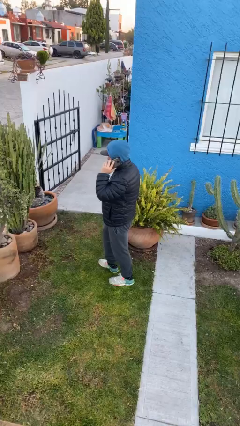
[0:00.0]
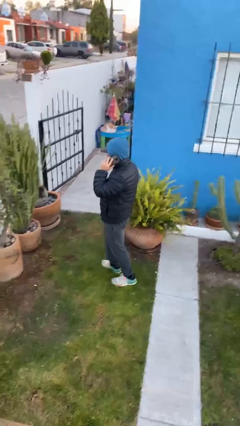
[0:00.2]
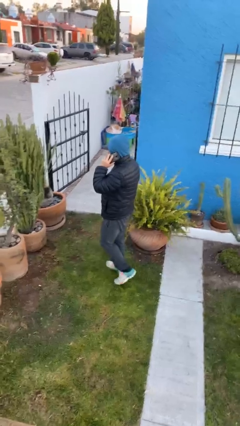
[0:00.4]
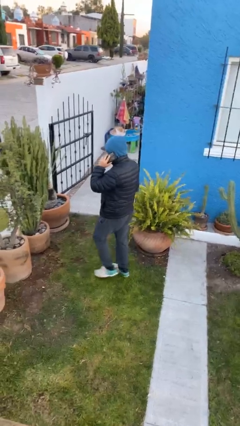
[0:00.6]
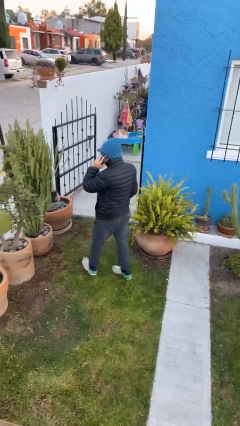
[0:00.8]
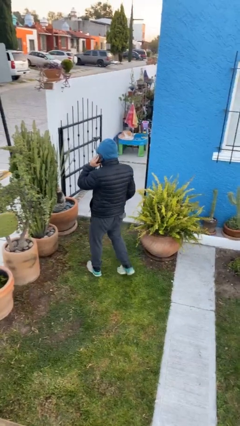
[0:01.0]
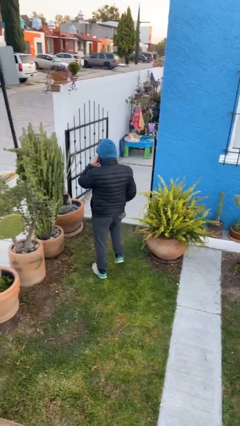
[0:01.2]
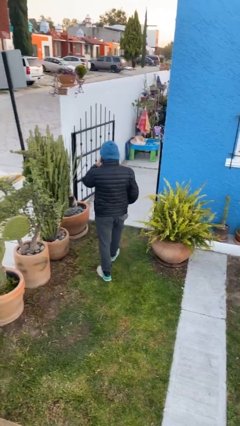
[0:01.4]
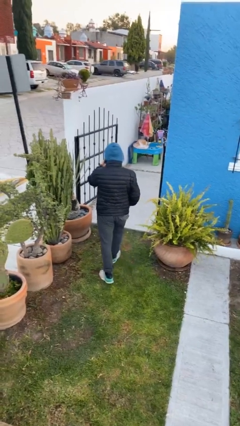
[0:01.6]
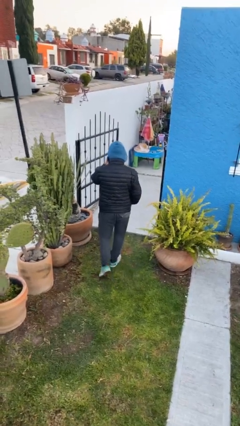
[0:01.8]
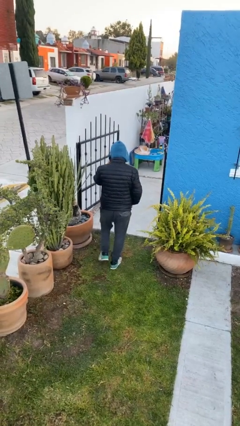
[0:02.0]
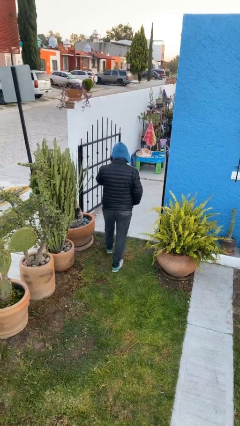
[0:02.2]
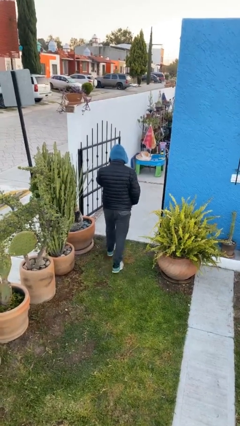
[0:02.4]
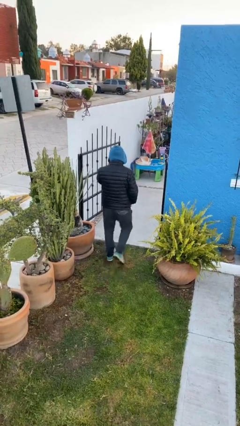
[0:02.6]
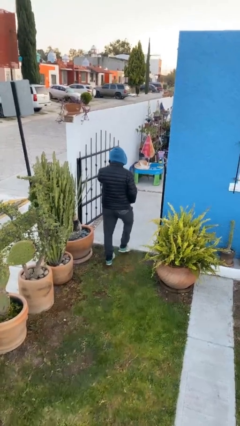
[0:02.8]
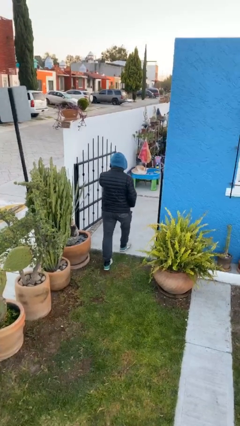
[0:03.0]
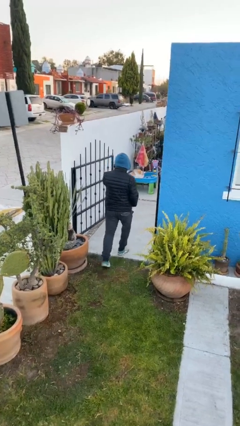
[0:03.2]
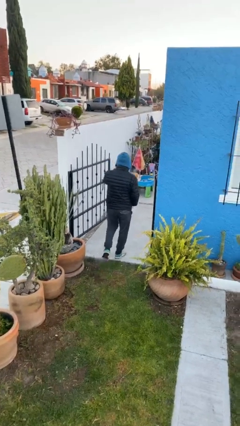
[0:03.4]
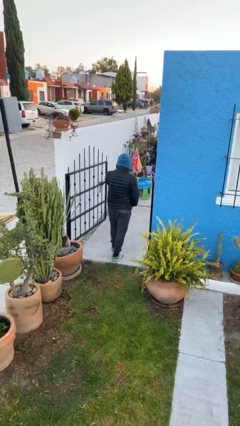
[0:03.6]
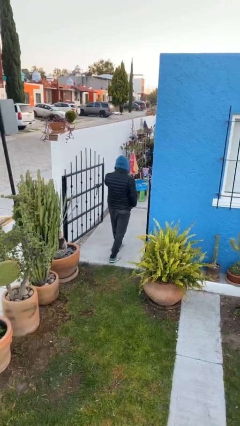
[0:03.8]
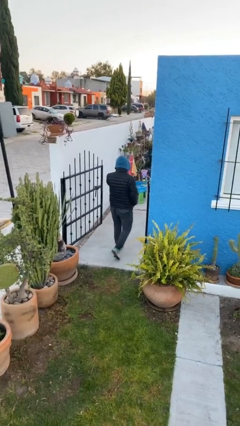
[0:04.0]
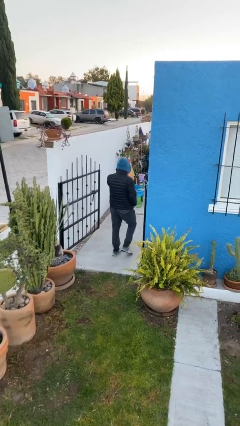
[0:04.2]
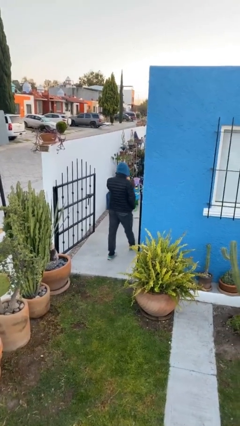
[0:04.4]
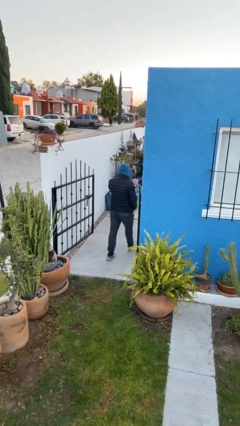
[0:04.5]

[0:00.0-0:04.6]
person exits scene through structure

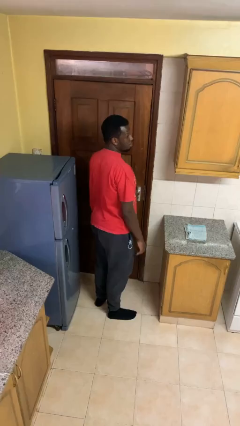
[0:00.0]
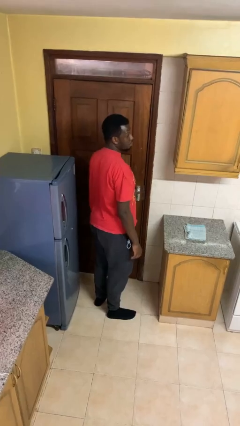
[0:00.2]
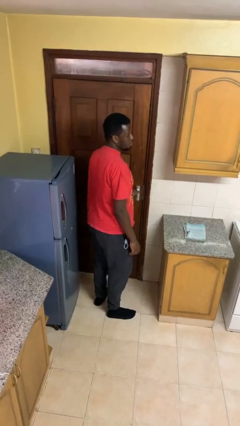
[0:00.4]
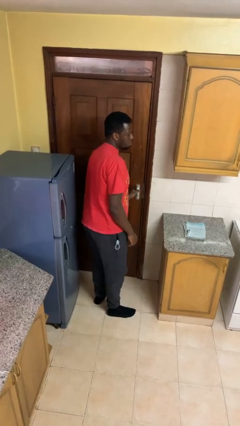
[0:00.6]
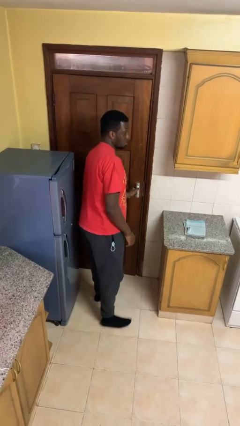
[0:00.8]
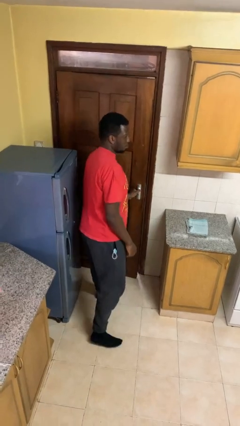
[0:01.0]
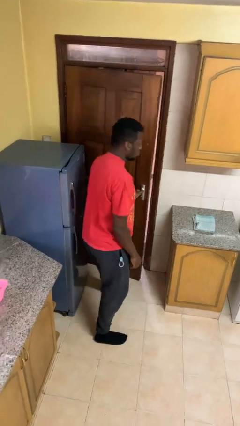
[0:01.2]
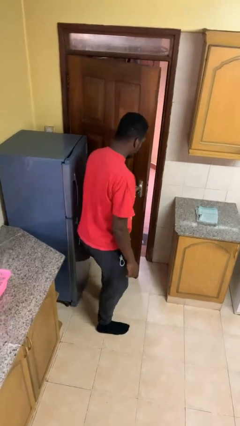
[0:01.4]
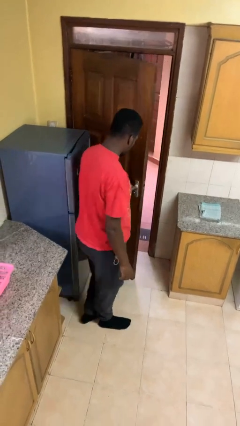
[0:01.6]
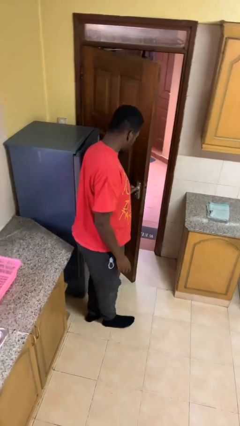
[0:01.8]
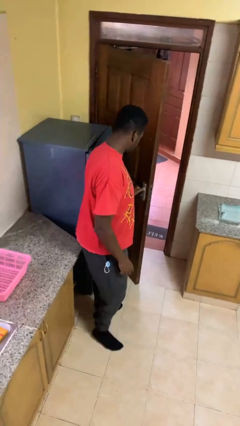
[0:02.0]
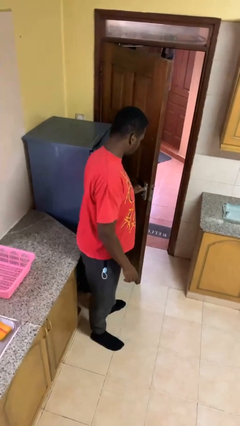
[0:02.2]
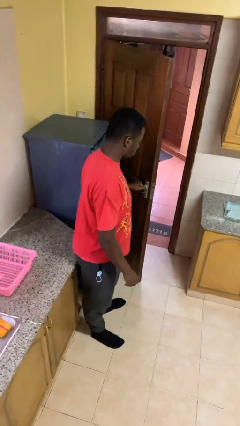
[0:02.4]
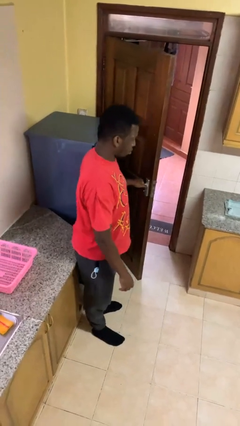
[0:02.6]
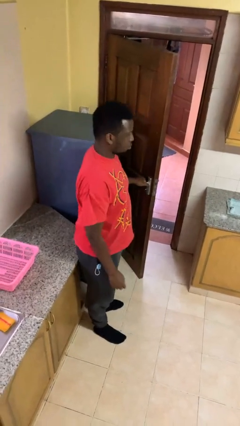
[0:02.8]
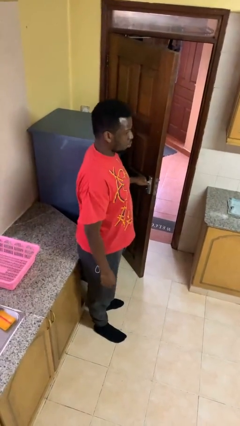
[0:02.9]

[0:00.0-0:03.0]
person opens facility door

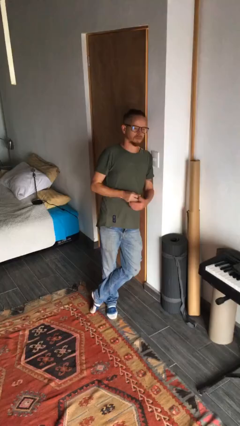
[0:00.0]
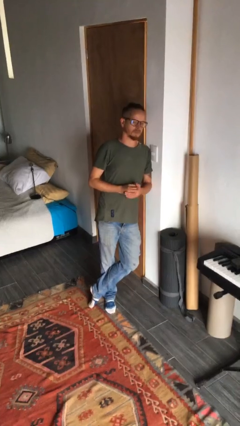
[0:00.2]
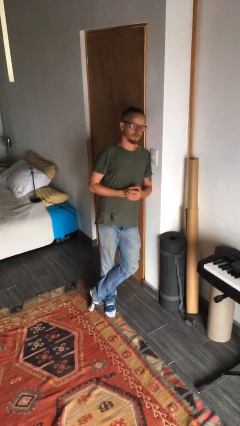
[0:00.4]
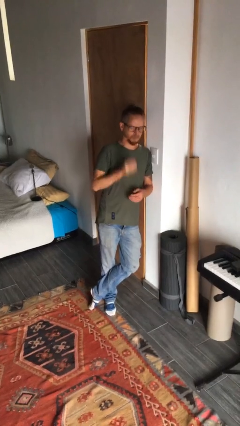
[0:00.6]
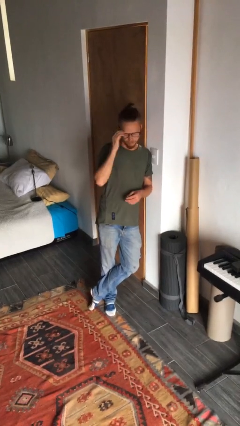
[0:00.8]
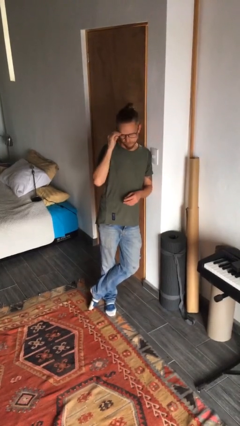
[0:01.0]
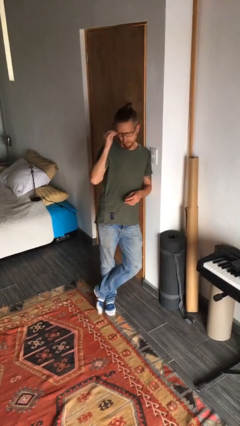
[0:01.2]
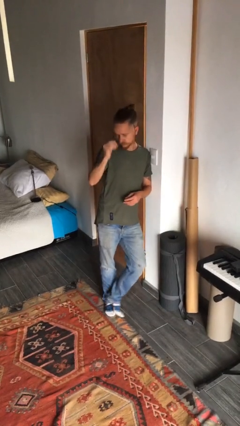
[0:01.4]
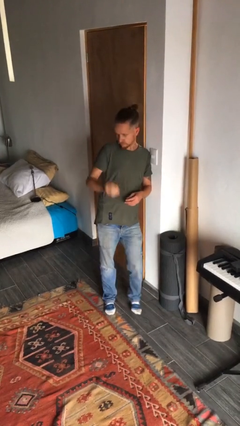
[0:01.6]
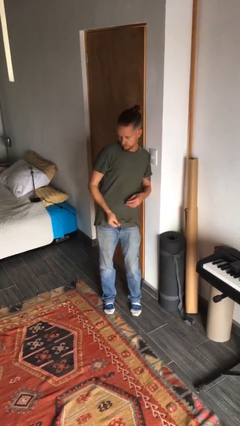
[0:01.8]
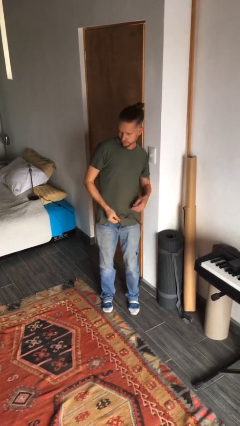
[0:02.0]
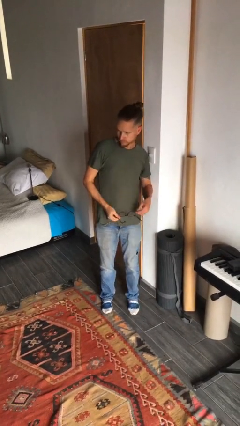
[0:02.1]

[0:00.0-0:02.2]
person takes off glasses

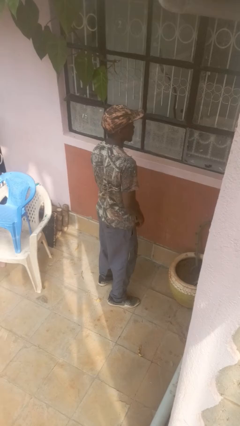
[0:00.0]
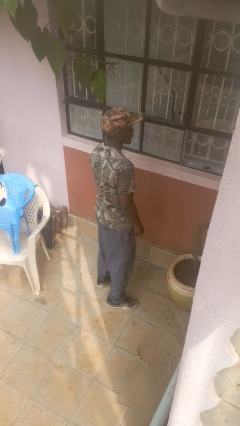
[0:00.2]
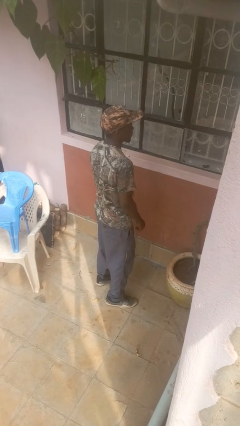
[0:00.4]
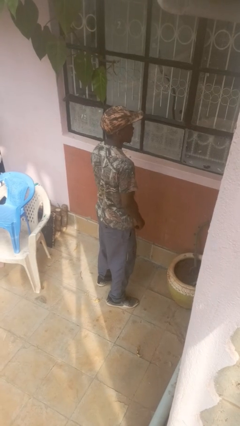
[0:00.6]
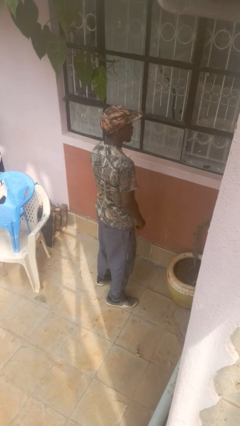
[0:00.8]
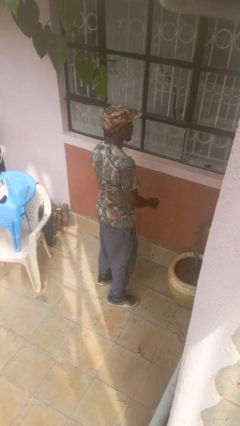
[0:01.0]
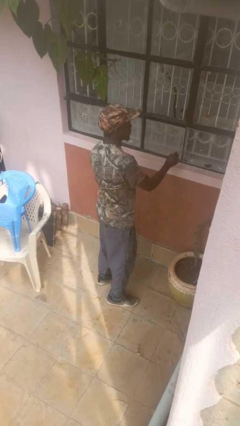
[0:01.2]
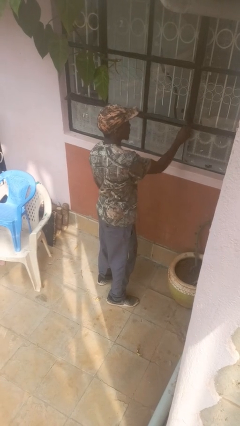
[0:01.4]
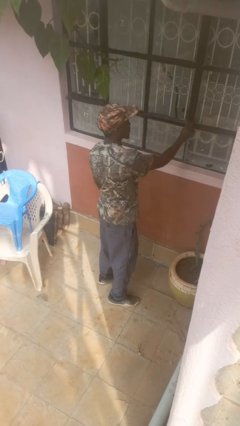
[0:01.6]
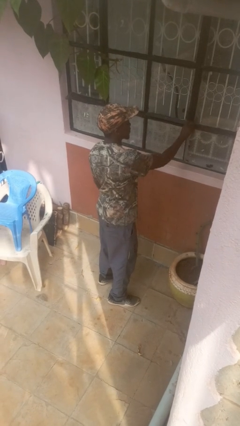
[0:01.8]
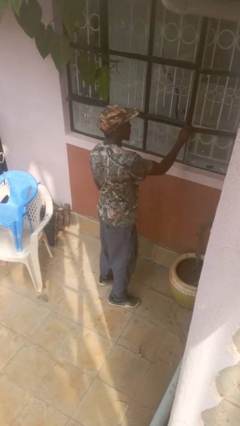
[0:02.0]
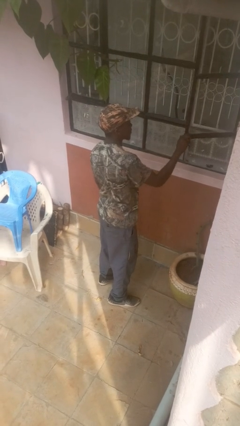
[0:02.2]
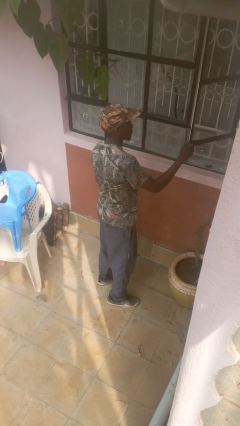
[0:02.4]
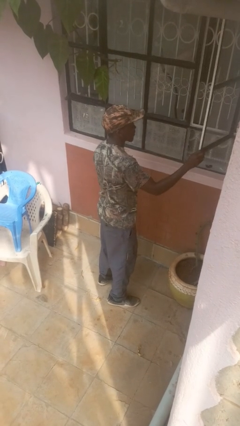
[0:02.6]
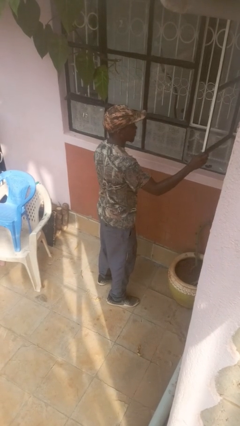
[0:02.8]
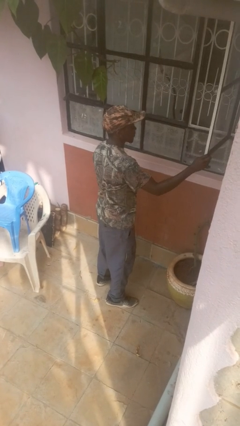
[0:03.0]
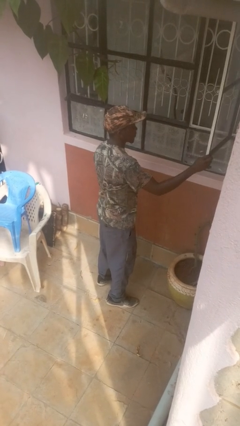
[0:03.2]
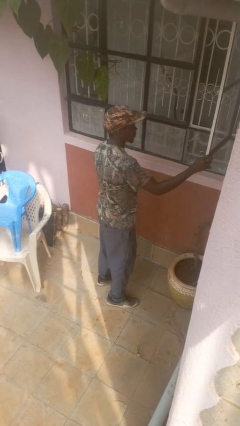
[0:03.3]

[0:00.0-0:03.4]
person opens home window

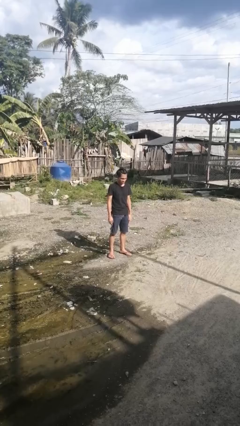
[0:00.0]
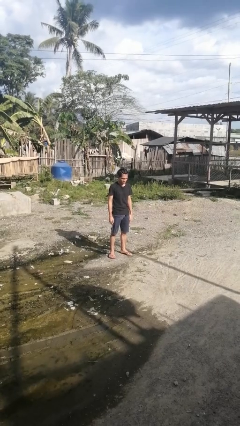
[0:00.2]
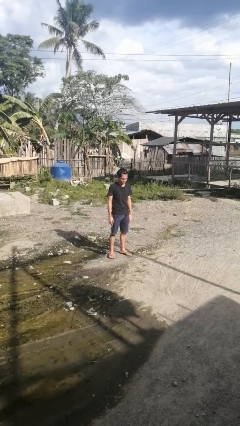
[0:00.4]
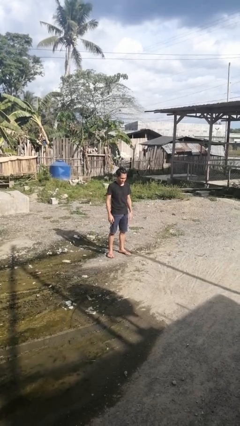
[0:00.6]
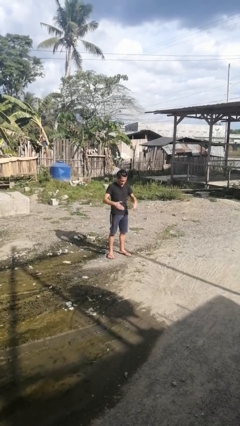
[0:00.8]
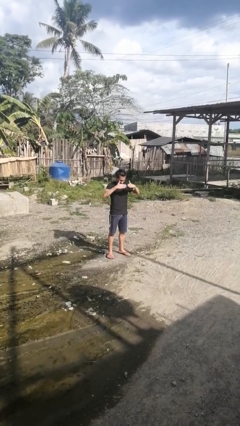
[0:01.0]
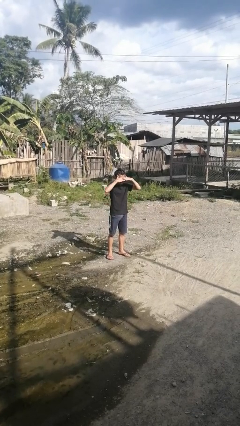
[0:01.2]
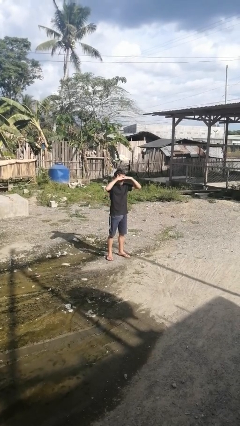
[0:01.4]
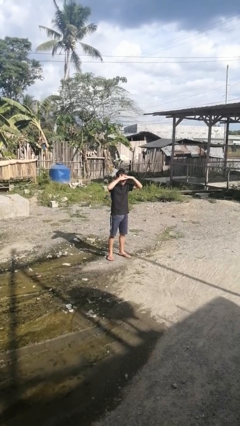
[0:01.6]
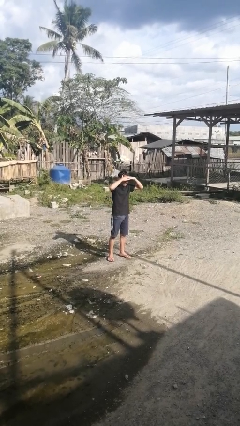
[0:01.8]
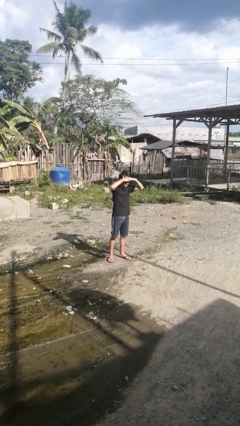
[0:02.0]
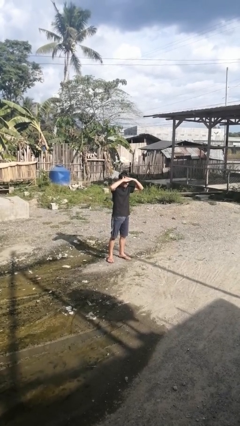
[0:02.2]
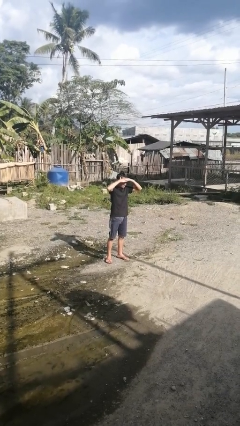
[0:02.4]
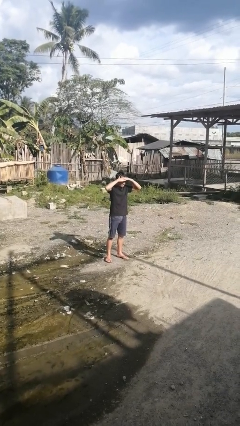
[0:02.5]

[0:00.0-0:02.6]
person shades eyes

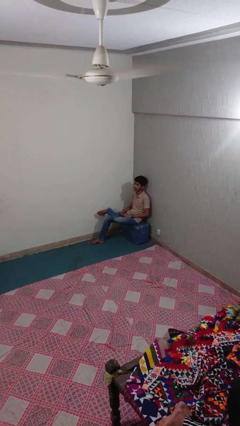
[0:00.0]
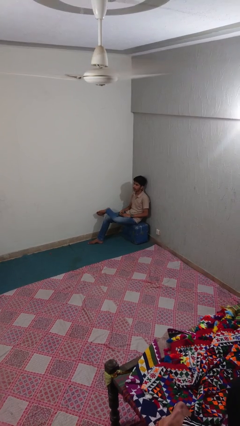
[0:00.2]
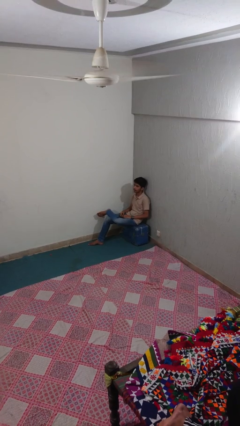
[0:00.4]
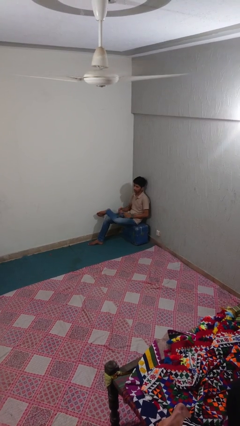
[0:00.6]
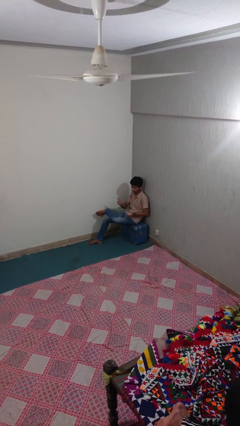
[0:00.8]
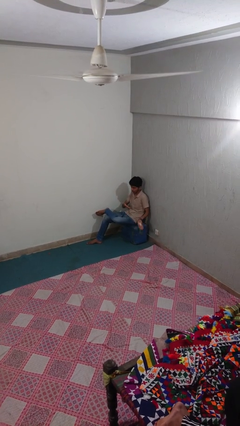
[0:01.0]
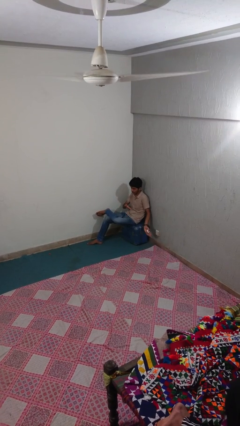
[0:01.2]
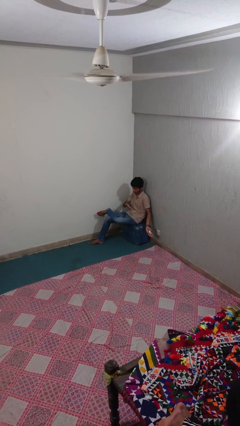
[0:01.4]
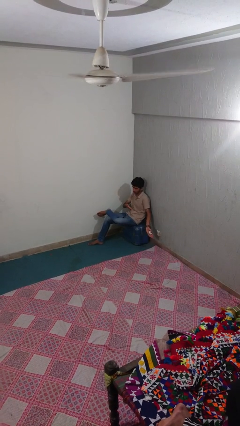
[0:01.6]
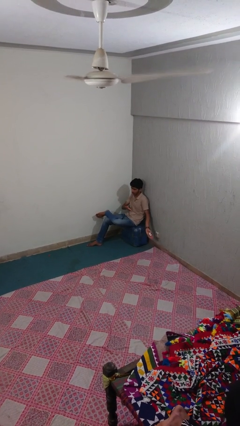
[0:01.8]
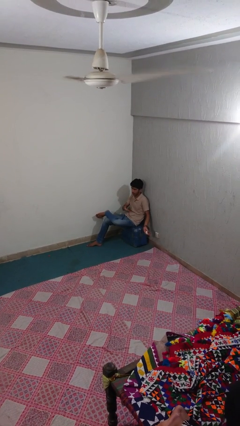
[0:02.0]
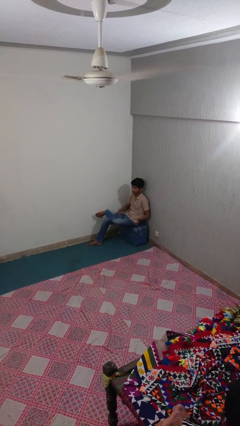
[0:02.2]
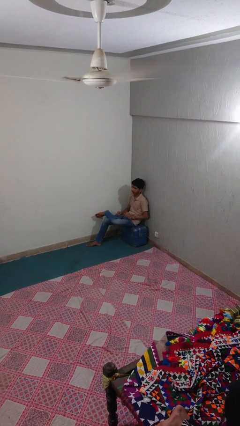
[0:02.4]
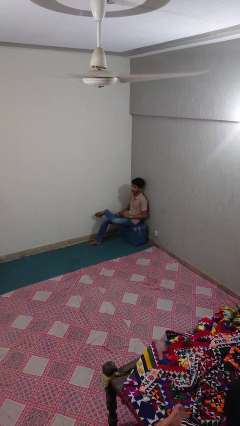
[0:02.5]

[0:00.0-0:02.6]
person gestures come here
